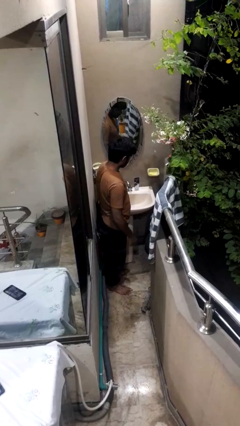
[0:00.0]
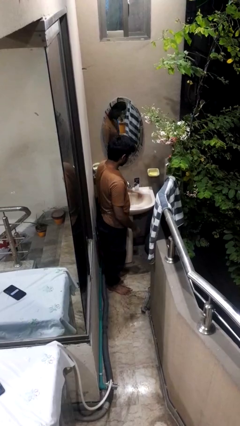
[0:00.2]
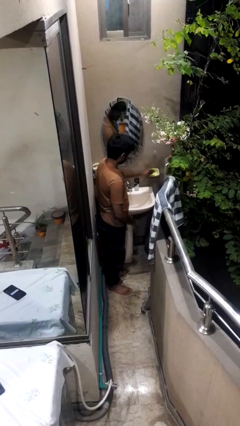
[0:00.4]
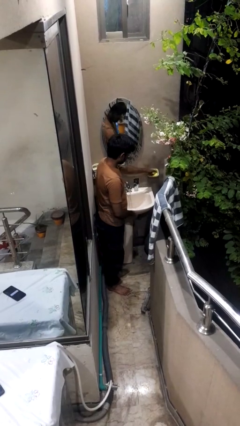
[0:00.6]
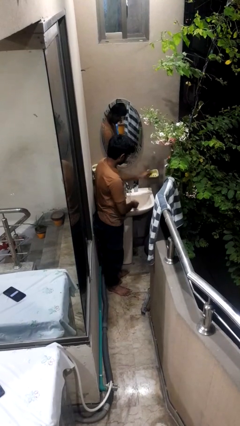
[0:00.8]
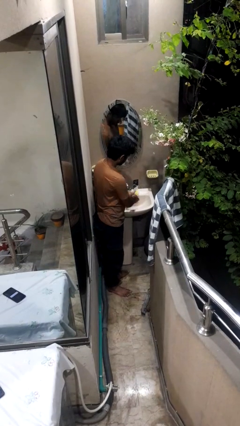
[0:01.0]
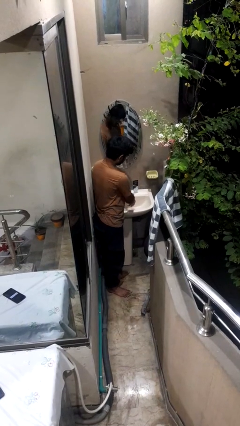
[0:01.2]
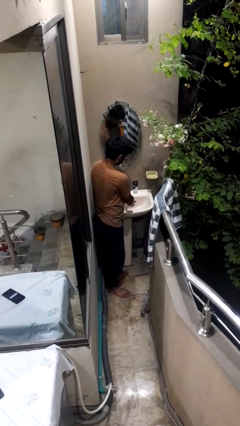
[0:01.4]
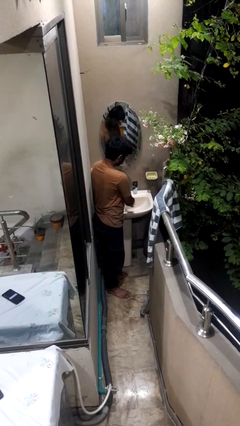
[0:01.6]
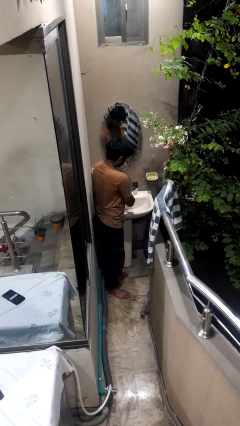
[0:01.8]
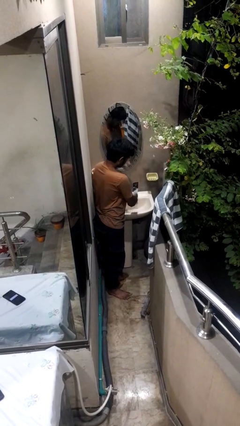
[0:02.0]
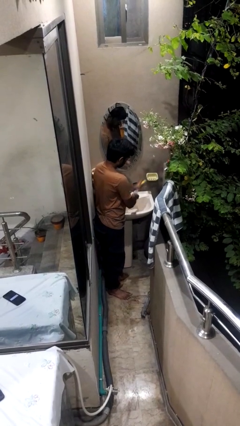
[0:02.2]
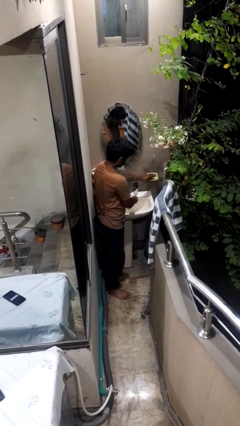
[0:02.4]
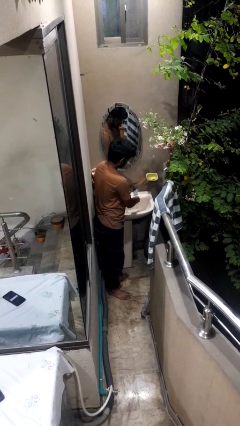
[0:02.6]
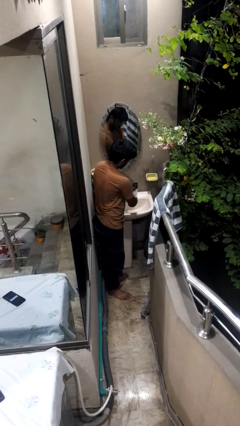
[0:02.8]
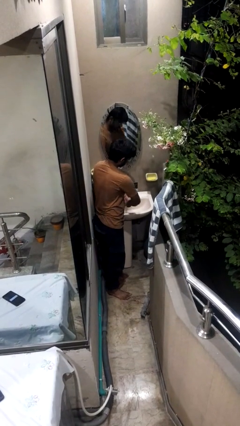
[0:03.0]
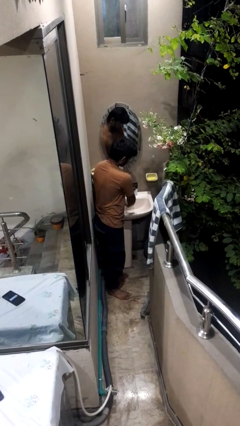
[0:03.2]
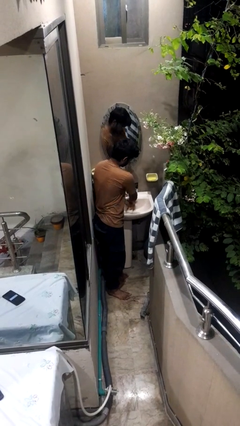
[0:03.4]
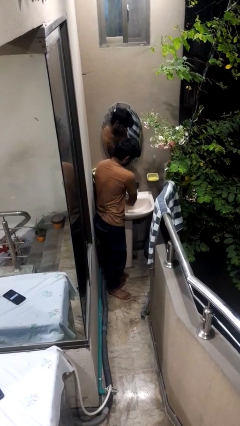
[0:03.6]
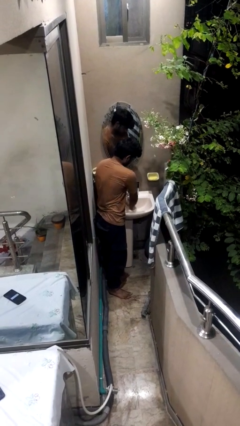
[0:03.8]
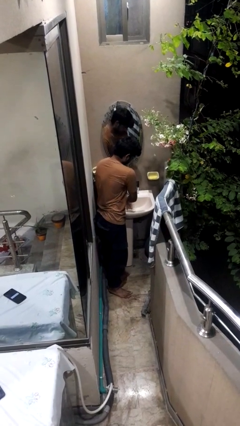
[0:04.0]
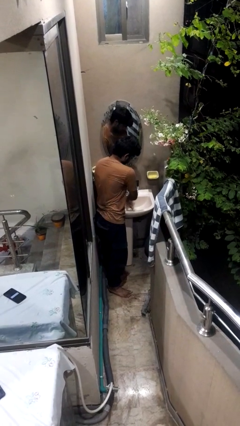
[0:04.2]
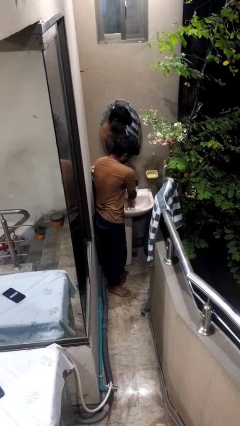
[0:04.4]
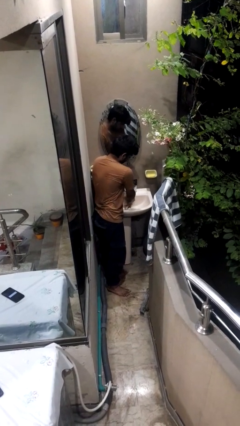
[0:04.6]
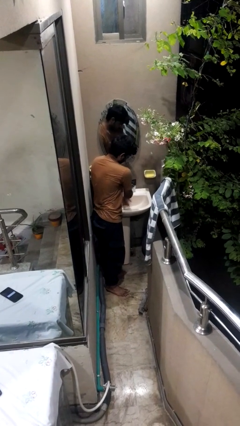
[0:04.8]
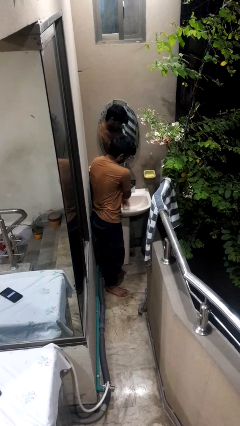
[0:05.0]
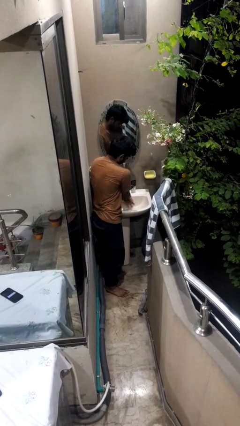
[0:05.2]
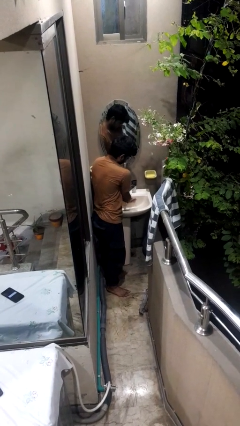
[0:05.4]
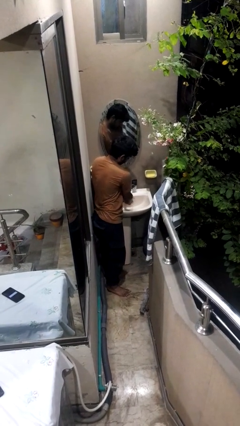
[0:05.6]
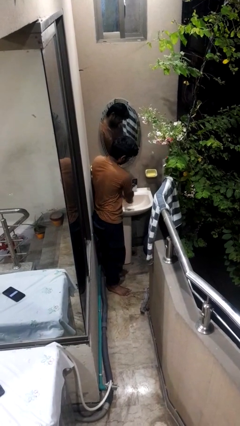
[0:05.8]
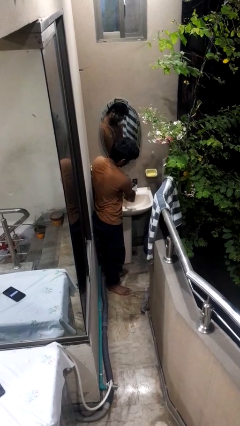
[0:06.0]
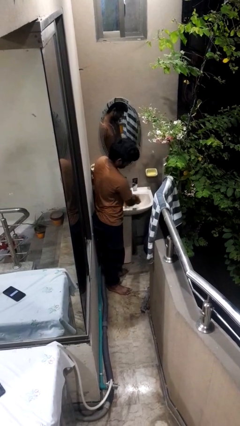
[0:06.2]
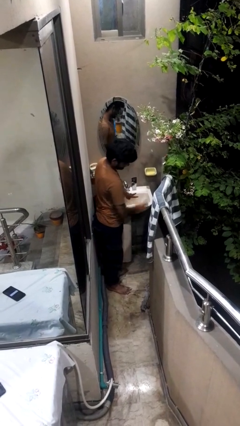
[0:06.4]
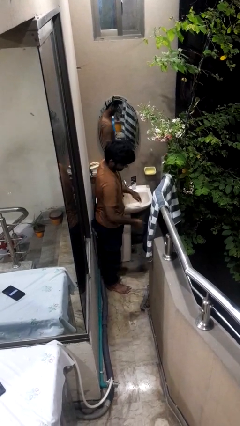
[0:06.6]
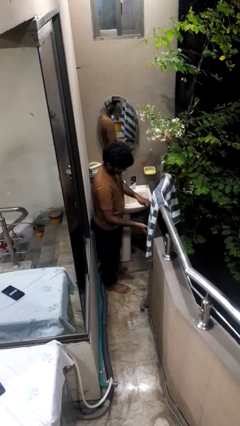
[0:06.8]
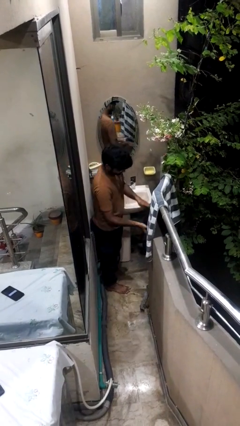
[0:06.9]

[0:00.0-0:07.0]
person washes hands

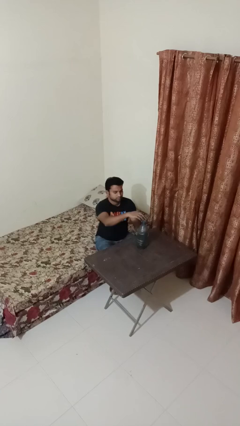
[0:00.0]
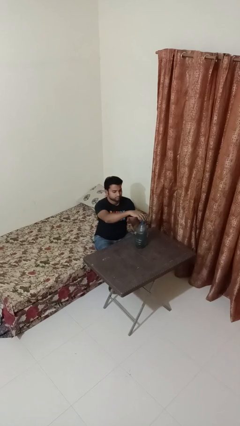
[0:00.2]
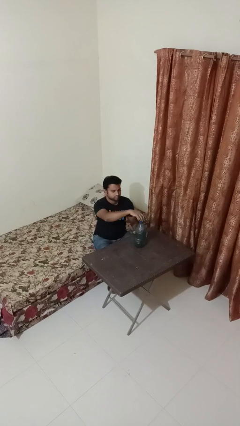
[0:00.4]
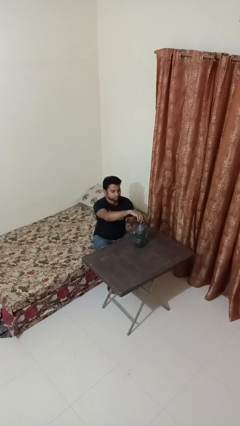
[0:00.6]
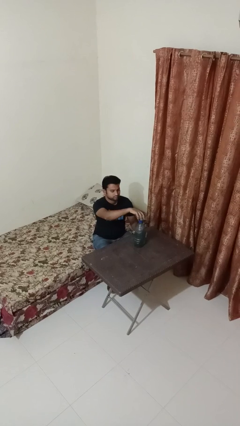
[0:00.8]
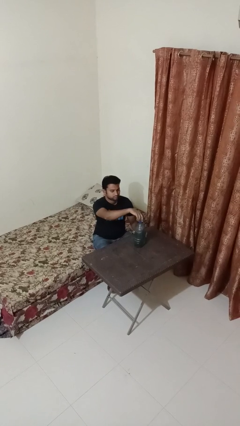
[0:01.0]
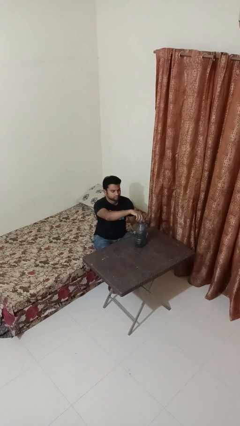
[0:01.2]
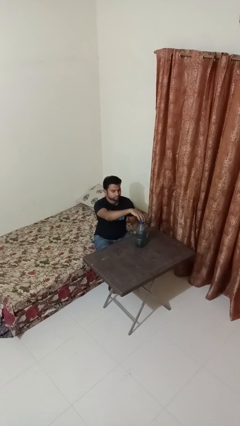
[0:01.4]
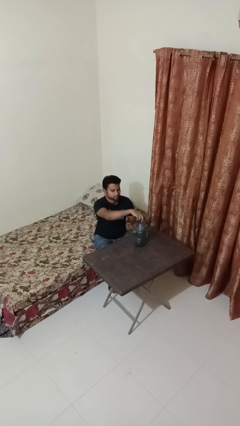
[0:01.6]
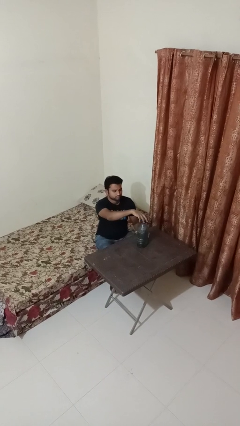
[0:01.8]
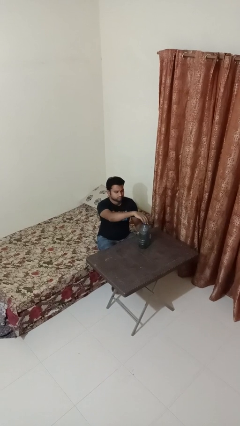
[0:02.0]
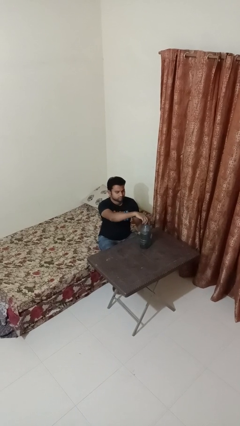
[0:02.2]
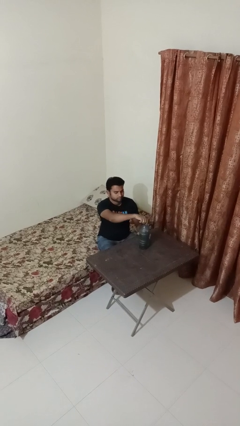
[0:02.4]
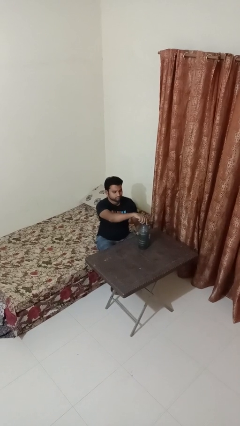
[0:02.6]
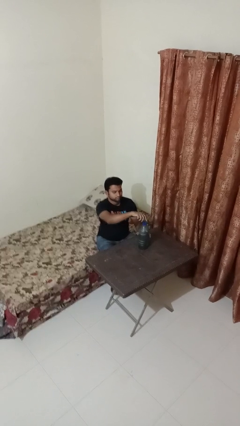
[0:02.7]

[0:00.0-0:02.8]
person screws lid to bottle

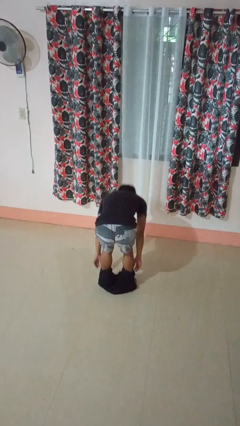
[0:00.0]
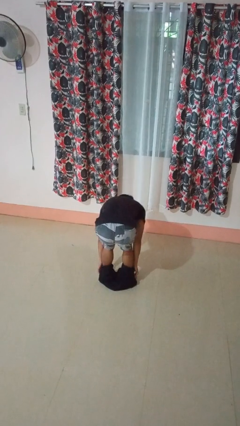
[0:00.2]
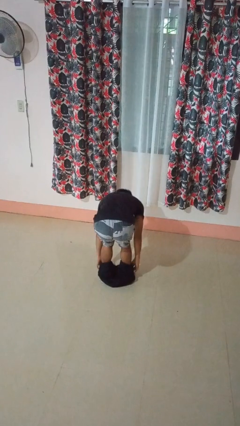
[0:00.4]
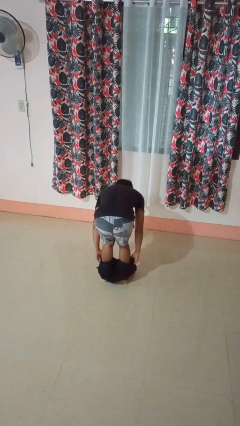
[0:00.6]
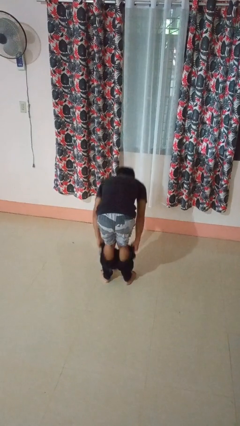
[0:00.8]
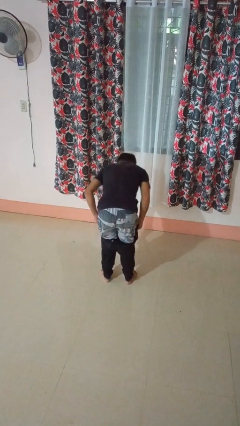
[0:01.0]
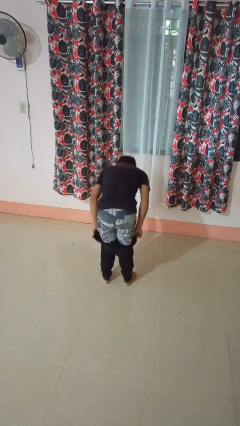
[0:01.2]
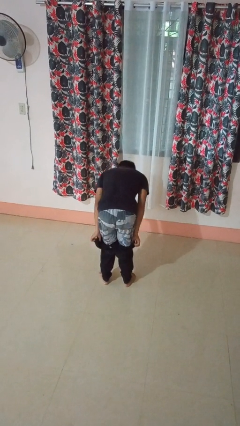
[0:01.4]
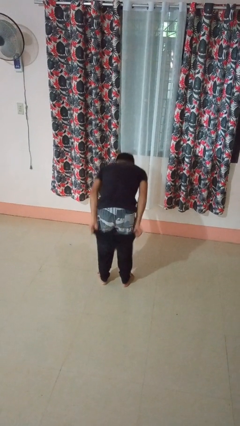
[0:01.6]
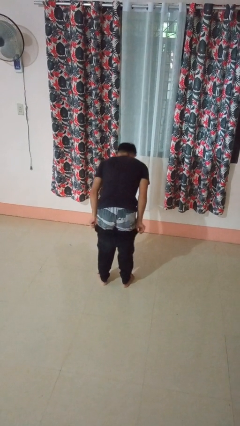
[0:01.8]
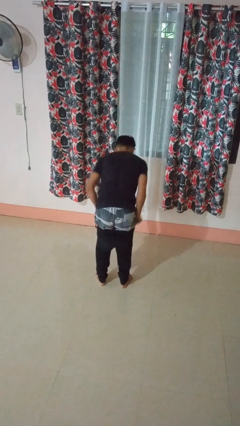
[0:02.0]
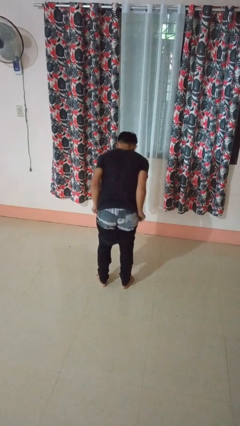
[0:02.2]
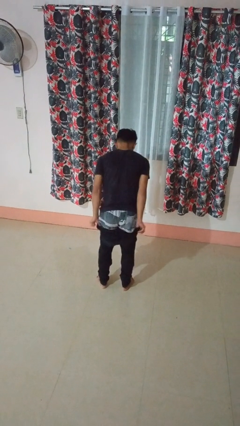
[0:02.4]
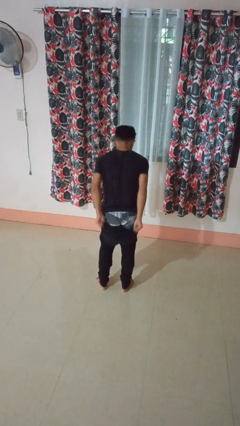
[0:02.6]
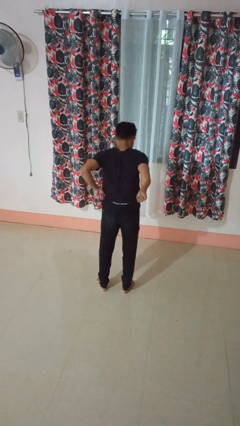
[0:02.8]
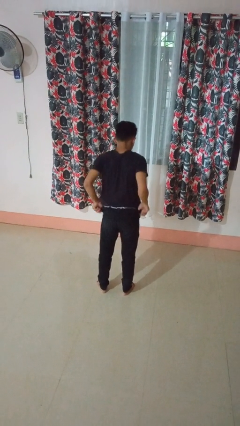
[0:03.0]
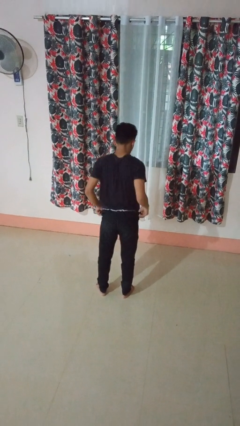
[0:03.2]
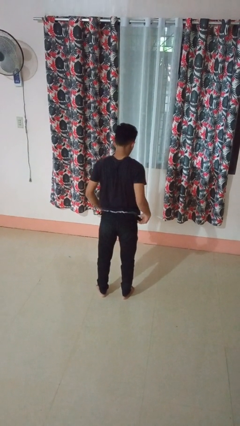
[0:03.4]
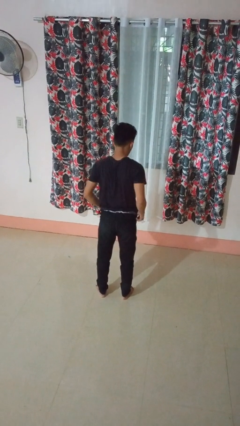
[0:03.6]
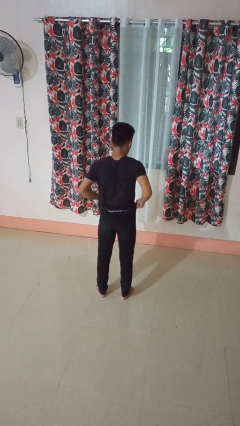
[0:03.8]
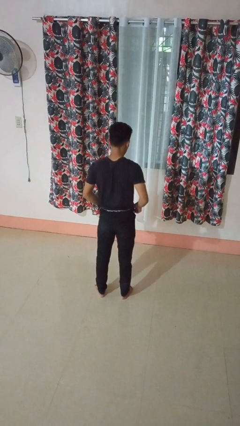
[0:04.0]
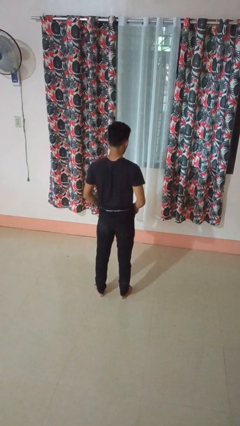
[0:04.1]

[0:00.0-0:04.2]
person puts on pants

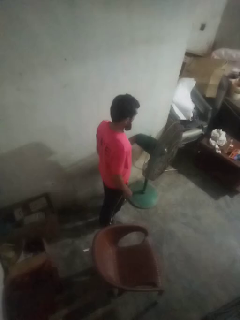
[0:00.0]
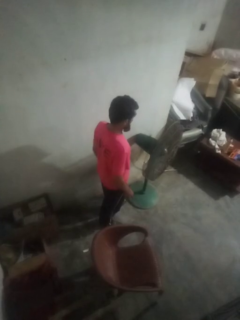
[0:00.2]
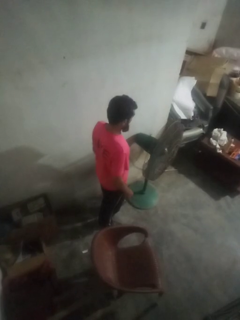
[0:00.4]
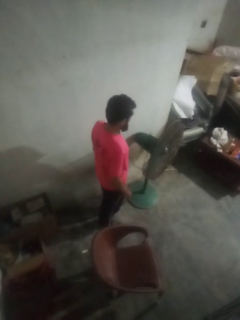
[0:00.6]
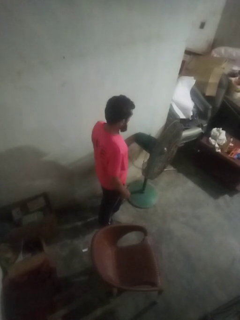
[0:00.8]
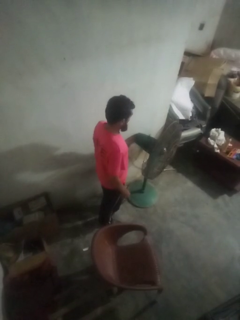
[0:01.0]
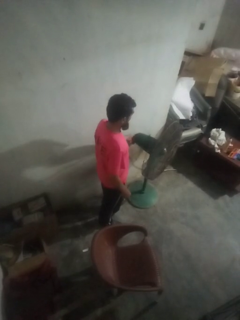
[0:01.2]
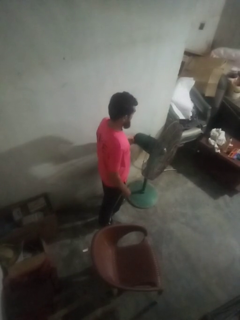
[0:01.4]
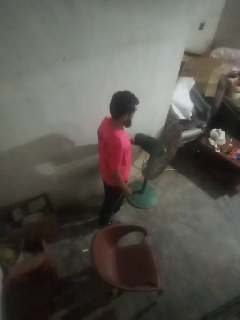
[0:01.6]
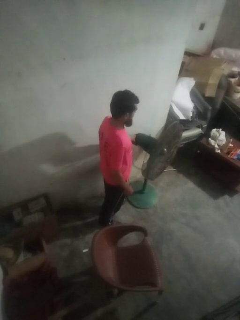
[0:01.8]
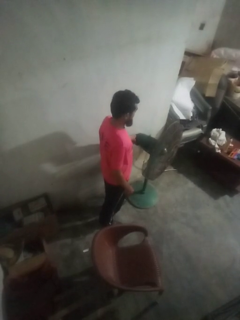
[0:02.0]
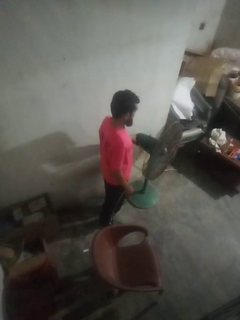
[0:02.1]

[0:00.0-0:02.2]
person turns on fan

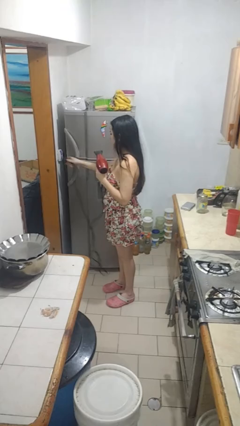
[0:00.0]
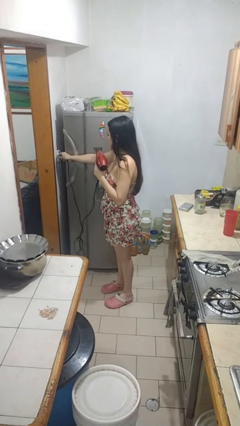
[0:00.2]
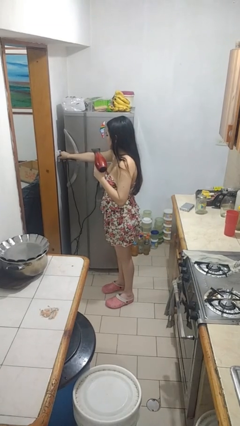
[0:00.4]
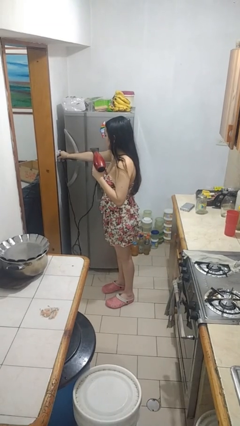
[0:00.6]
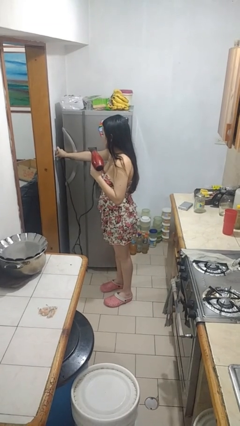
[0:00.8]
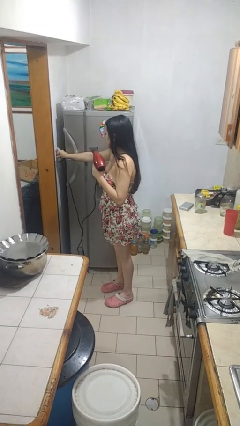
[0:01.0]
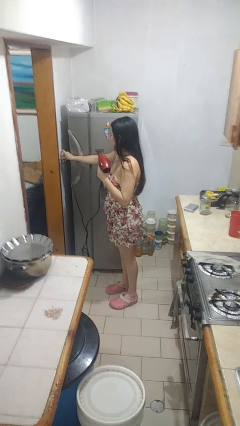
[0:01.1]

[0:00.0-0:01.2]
person plugs into electrical socket

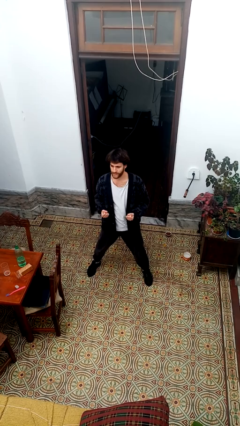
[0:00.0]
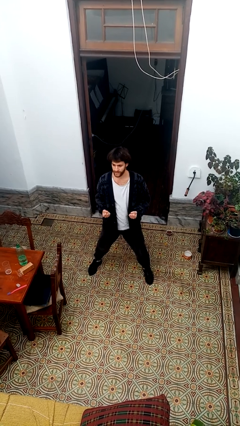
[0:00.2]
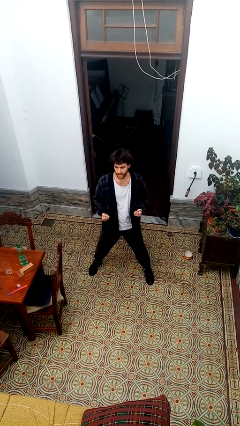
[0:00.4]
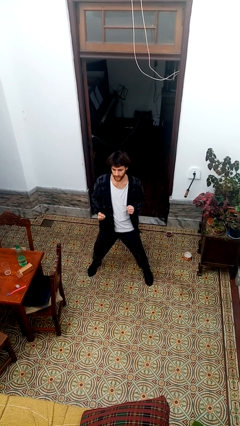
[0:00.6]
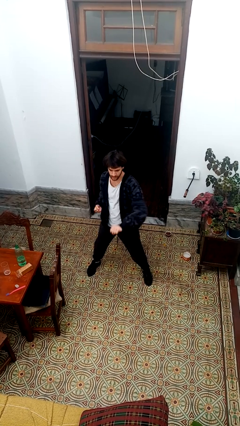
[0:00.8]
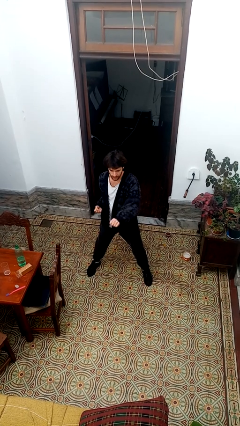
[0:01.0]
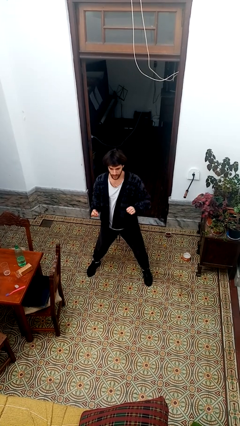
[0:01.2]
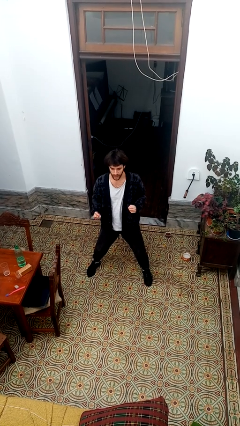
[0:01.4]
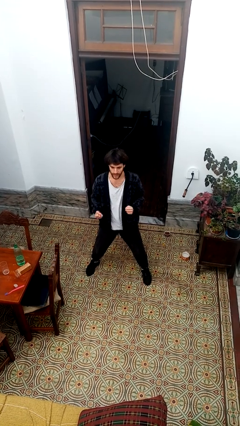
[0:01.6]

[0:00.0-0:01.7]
person punches
